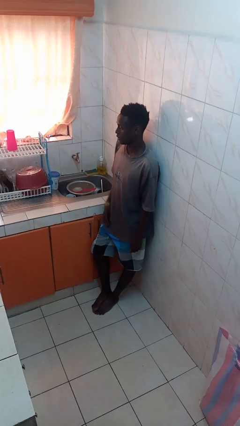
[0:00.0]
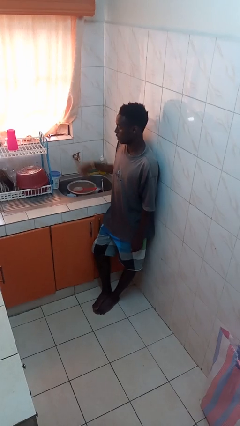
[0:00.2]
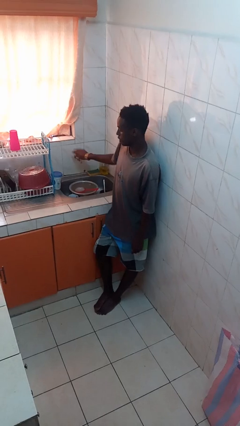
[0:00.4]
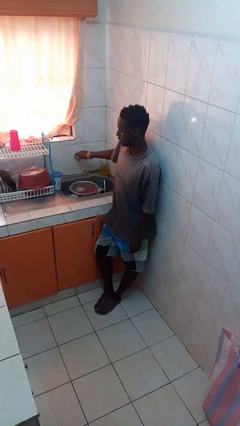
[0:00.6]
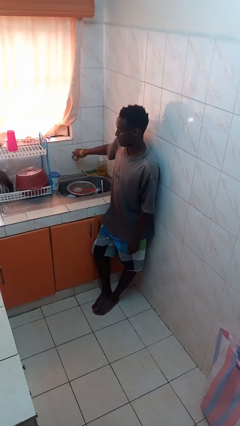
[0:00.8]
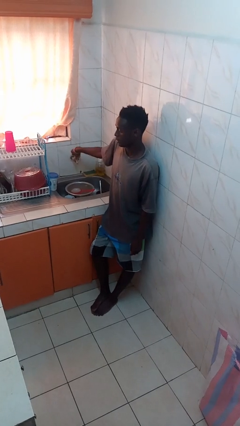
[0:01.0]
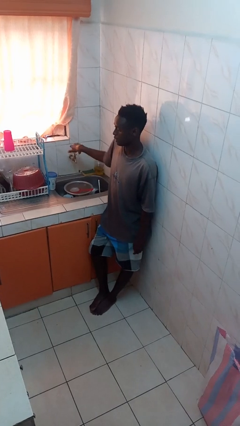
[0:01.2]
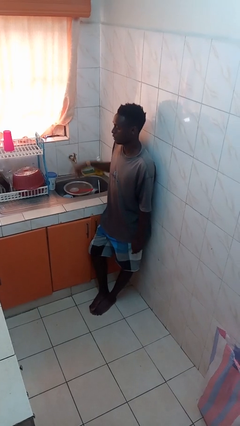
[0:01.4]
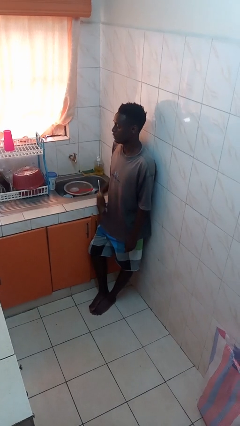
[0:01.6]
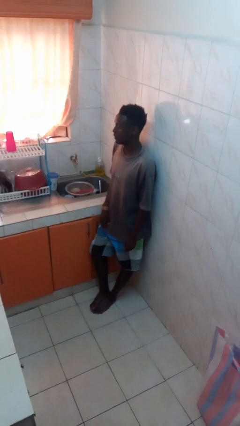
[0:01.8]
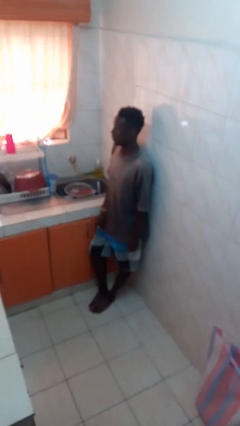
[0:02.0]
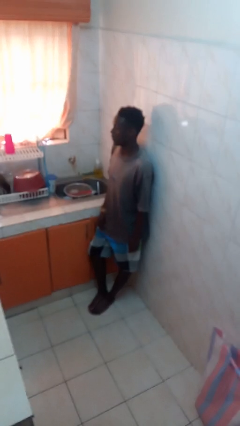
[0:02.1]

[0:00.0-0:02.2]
person turns off faucet

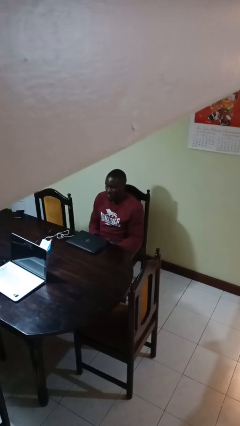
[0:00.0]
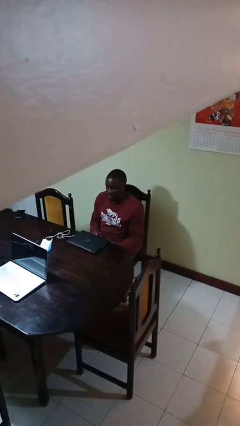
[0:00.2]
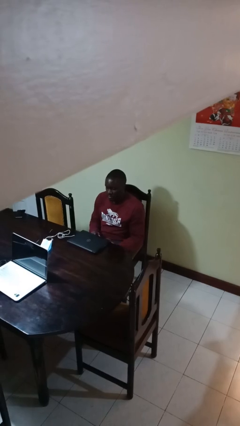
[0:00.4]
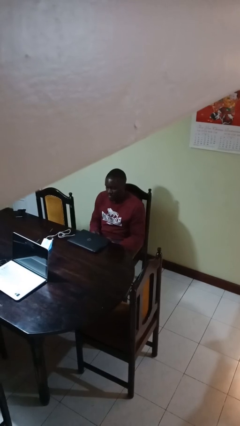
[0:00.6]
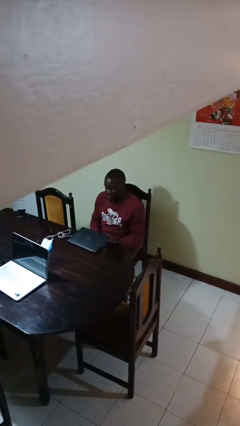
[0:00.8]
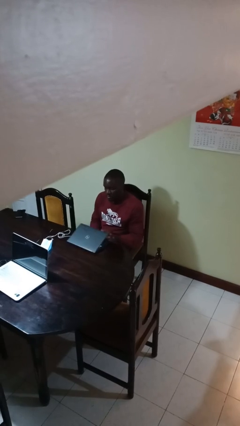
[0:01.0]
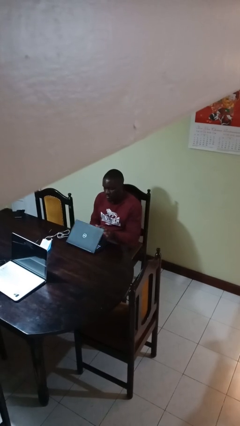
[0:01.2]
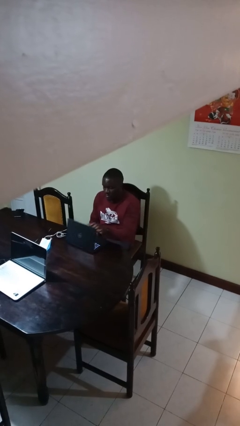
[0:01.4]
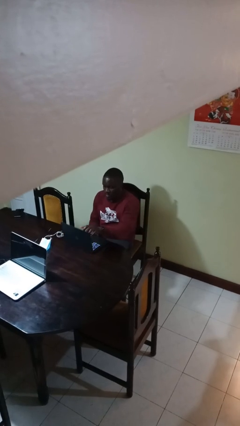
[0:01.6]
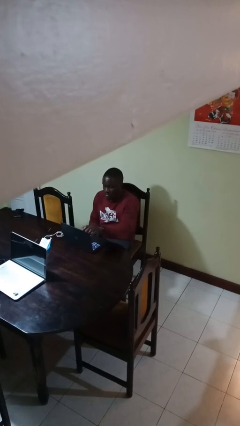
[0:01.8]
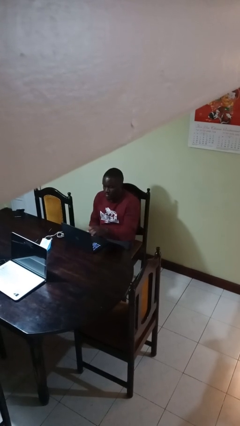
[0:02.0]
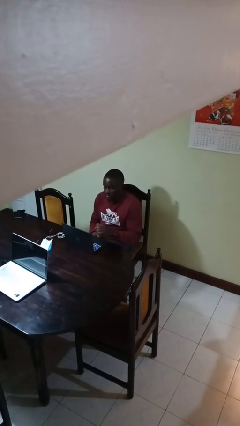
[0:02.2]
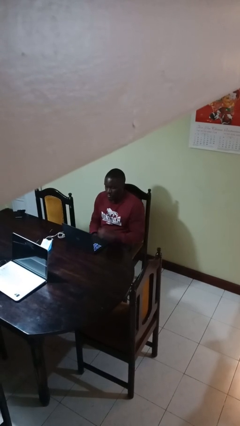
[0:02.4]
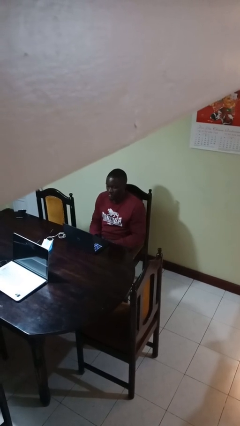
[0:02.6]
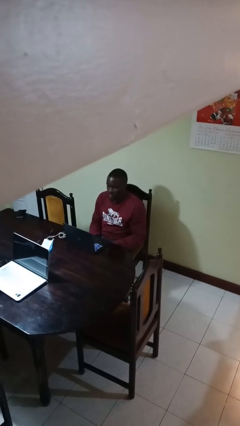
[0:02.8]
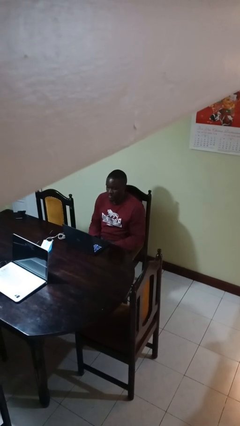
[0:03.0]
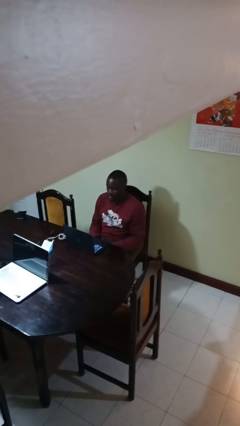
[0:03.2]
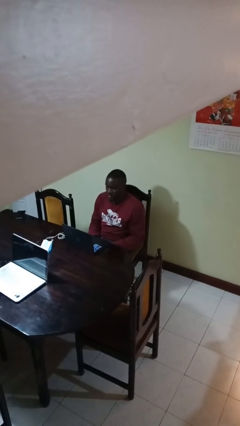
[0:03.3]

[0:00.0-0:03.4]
person opens laptop

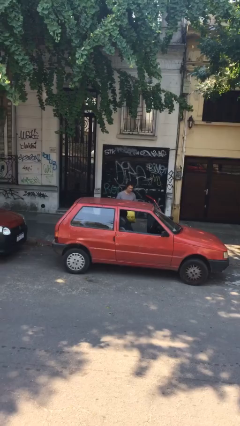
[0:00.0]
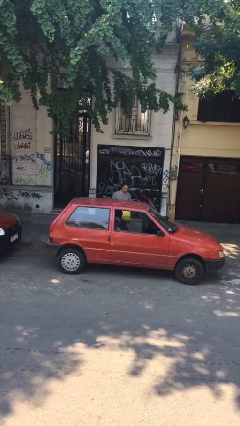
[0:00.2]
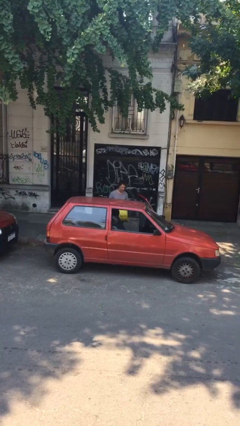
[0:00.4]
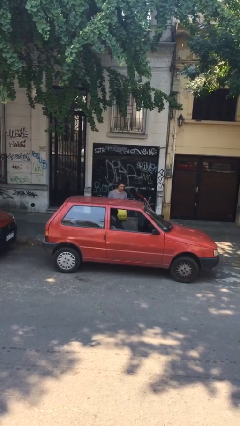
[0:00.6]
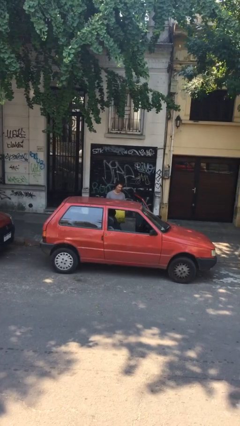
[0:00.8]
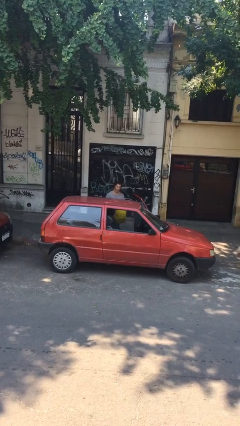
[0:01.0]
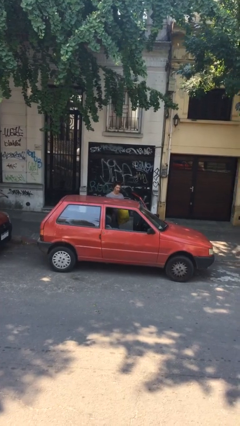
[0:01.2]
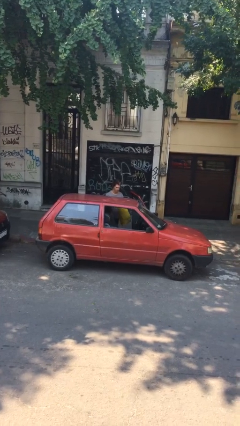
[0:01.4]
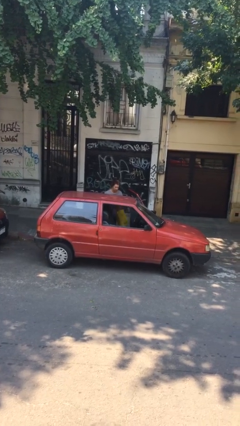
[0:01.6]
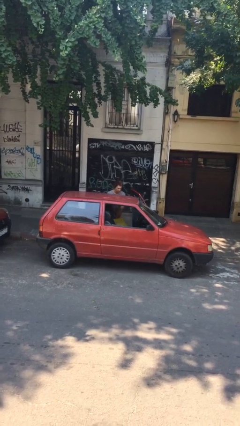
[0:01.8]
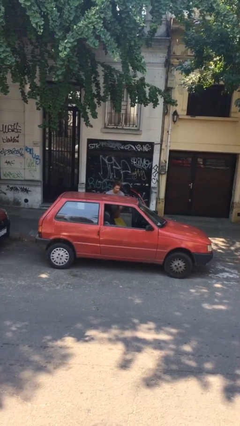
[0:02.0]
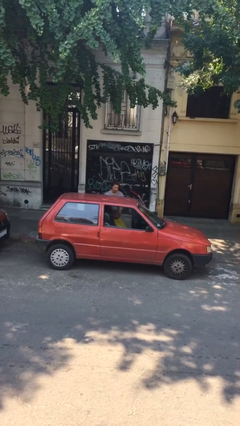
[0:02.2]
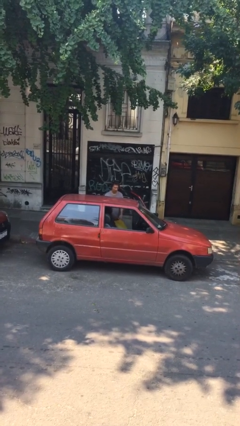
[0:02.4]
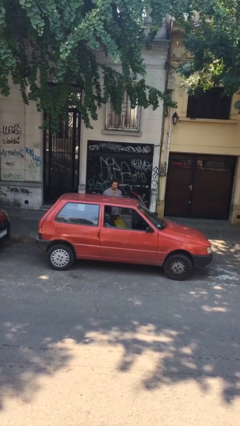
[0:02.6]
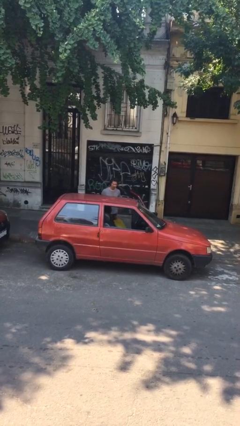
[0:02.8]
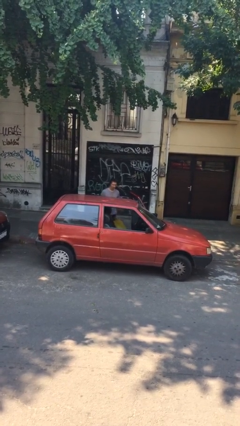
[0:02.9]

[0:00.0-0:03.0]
person loads car

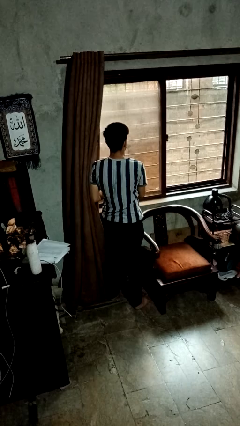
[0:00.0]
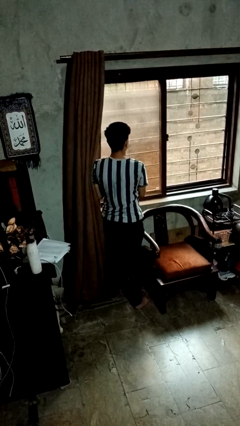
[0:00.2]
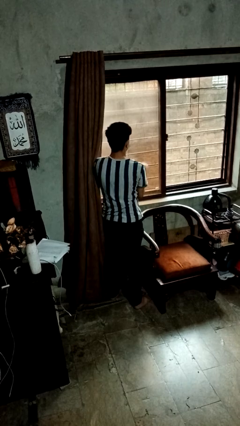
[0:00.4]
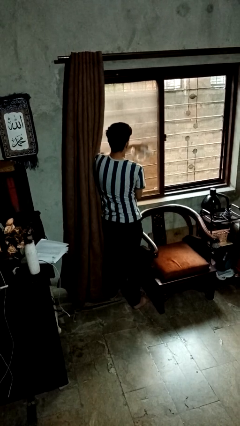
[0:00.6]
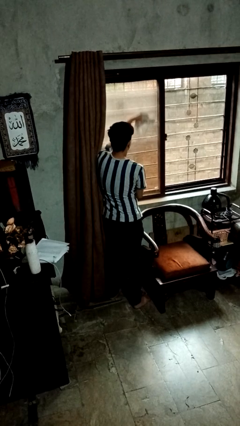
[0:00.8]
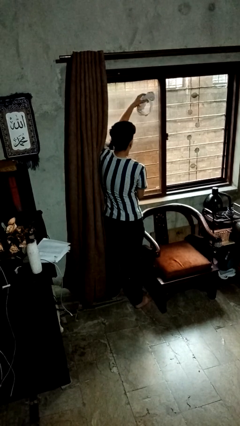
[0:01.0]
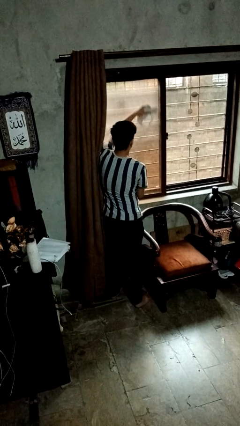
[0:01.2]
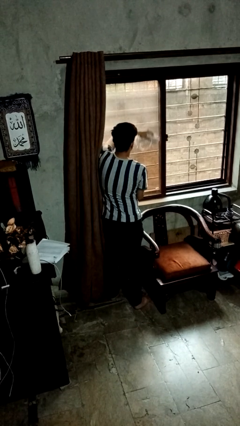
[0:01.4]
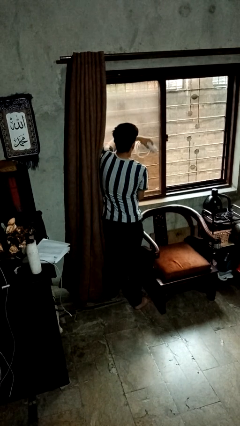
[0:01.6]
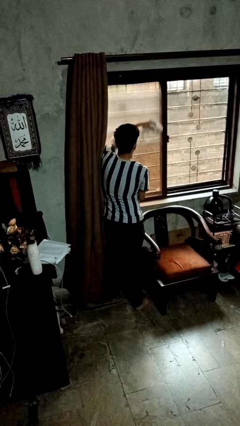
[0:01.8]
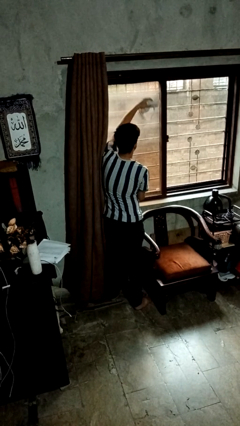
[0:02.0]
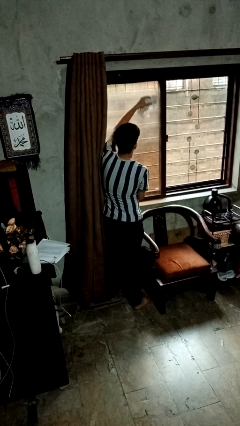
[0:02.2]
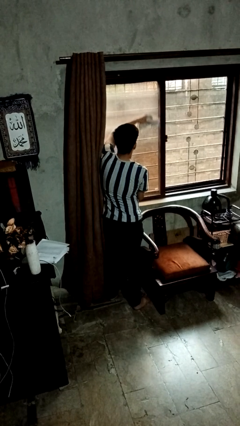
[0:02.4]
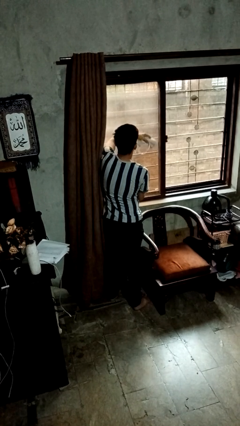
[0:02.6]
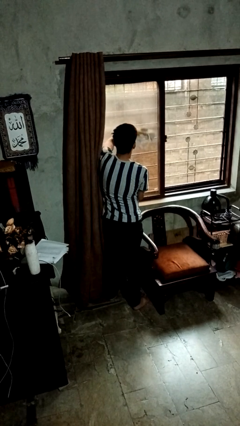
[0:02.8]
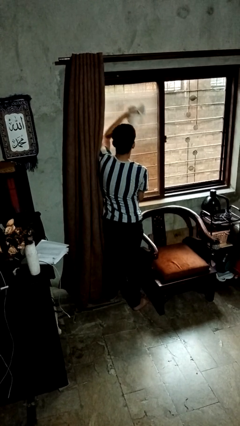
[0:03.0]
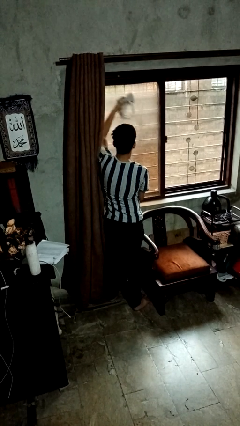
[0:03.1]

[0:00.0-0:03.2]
person washes window

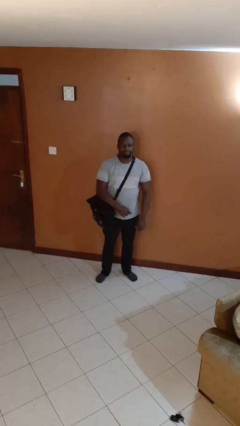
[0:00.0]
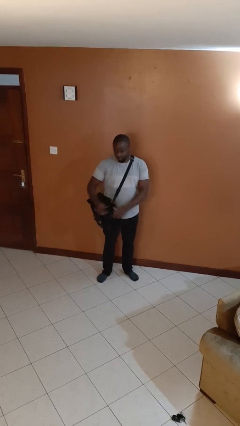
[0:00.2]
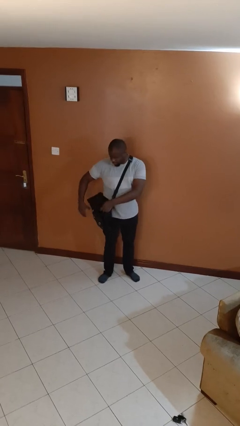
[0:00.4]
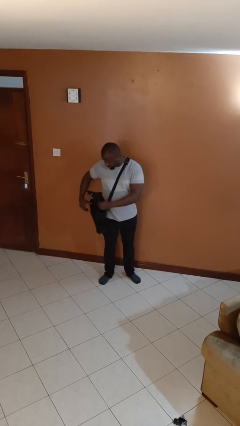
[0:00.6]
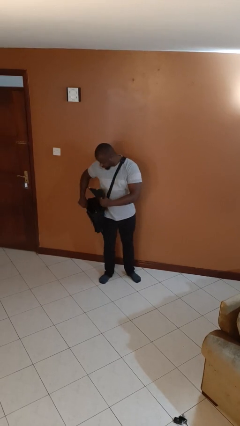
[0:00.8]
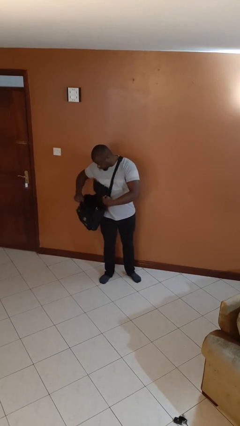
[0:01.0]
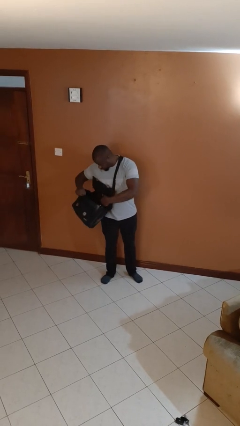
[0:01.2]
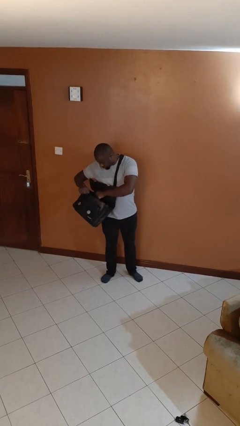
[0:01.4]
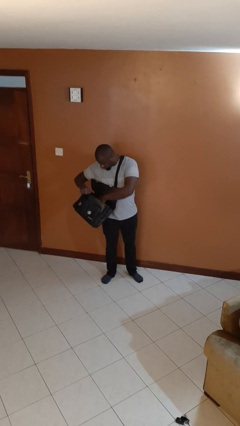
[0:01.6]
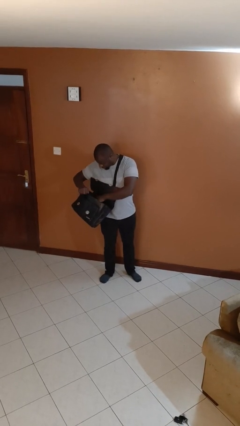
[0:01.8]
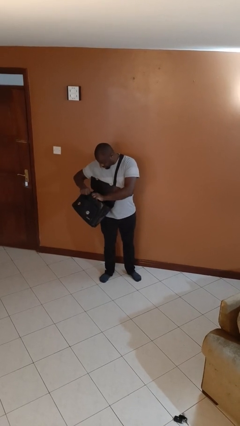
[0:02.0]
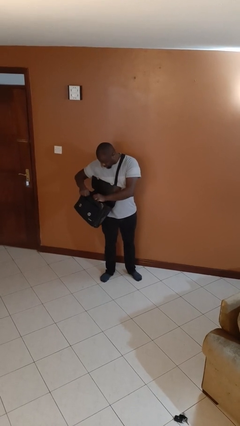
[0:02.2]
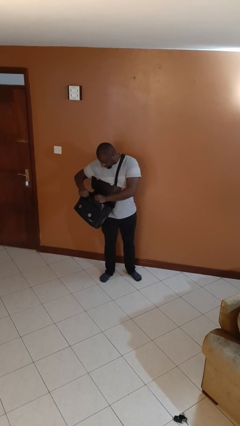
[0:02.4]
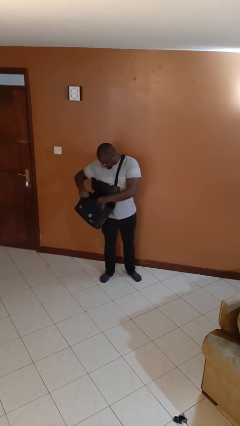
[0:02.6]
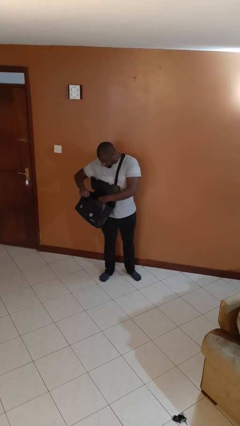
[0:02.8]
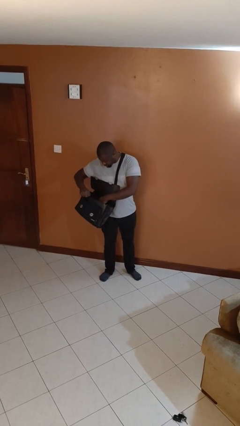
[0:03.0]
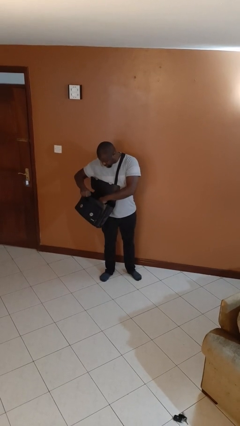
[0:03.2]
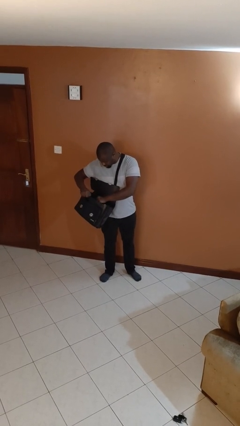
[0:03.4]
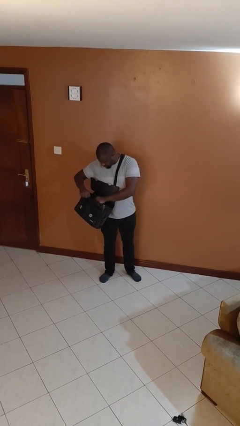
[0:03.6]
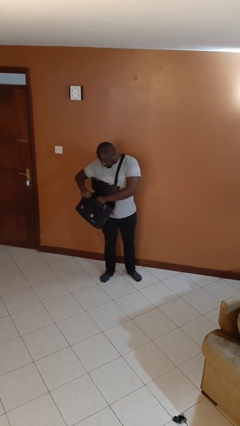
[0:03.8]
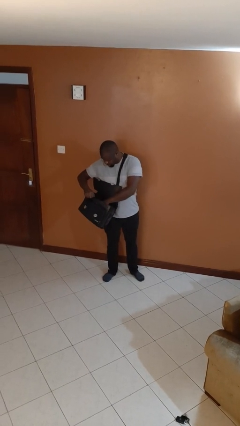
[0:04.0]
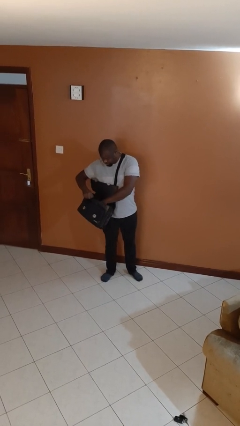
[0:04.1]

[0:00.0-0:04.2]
person searches in purse

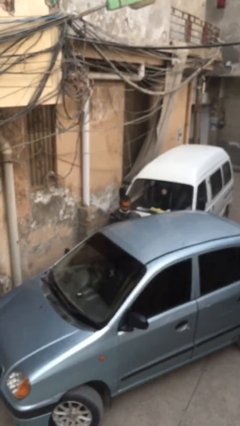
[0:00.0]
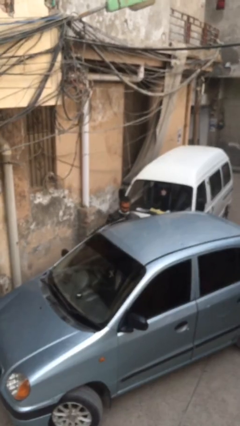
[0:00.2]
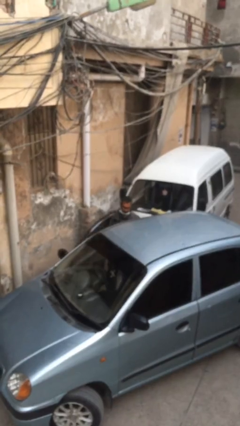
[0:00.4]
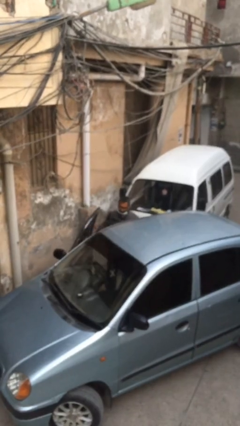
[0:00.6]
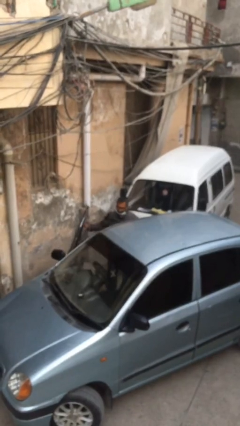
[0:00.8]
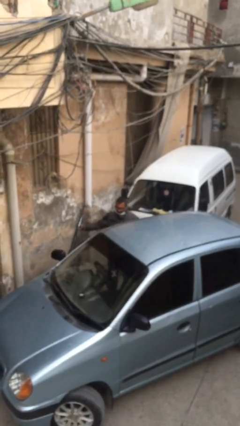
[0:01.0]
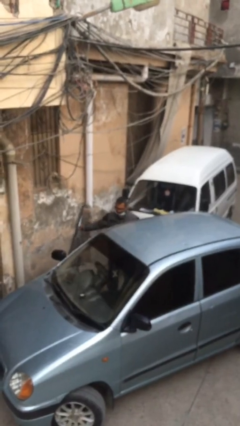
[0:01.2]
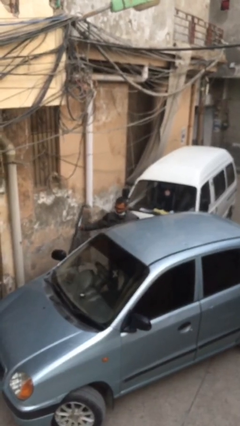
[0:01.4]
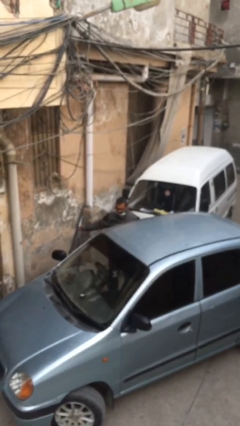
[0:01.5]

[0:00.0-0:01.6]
person opens car door
